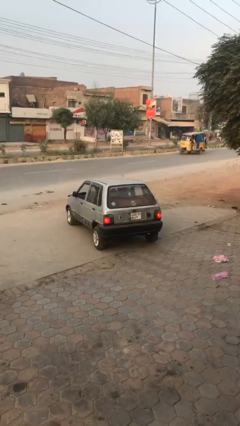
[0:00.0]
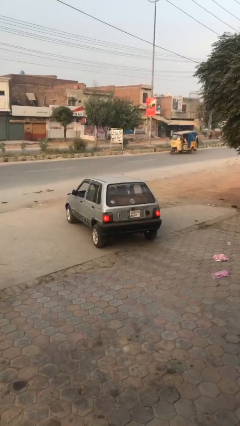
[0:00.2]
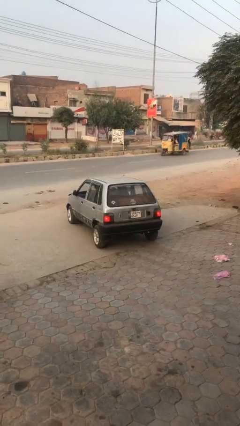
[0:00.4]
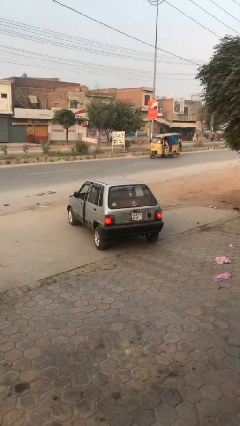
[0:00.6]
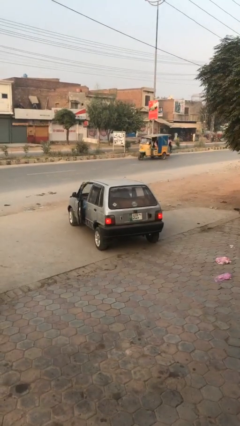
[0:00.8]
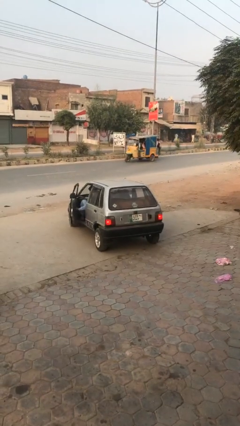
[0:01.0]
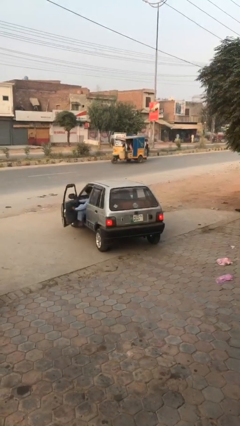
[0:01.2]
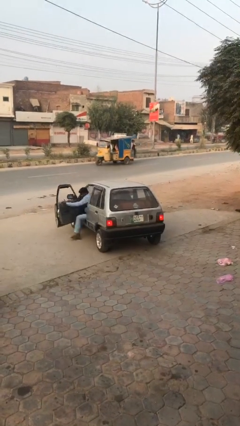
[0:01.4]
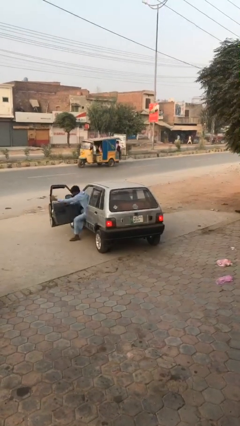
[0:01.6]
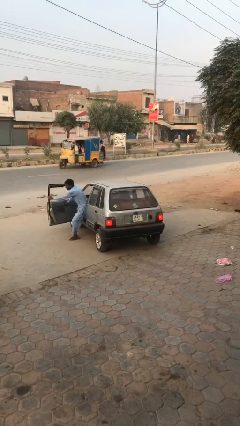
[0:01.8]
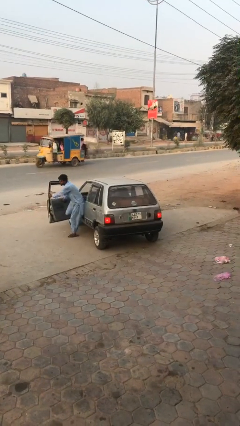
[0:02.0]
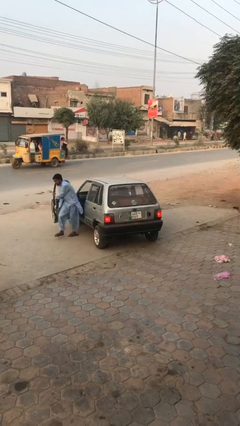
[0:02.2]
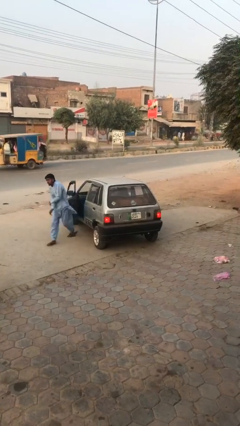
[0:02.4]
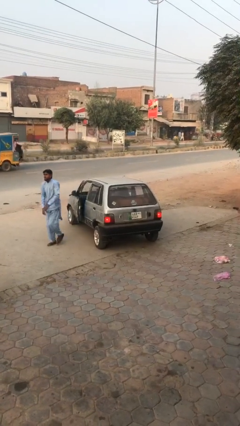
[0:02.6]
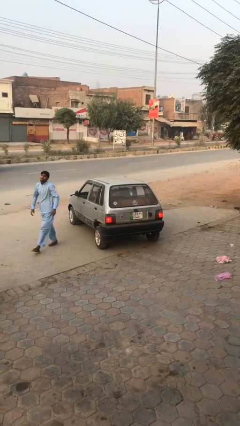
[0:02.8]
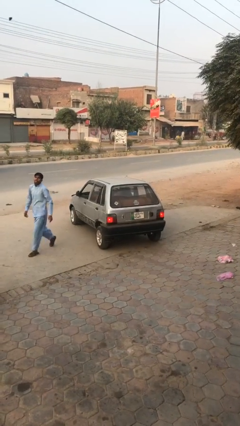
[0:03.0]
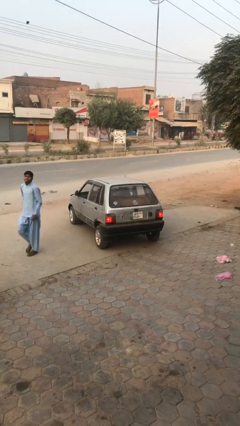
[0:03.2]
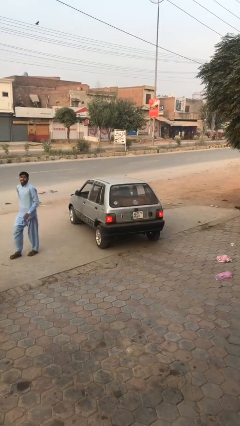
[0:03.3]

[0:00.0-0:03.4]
car drops off person

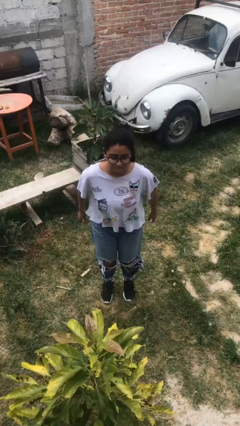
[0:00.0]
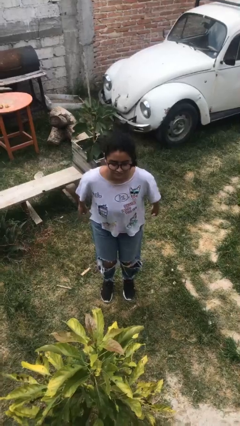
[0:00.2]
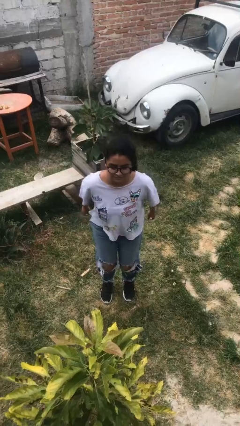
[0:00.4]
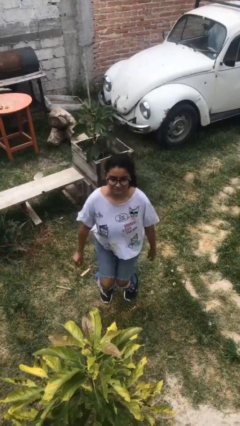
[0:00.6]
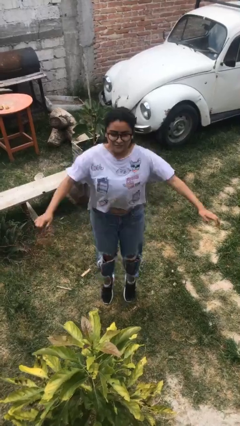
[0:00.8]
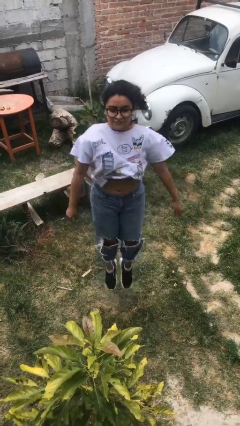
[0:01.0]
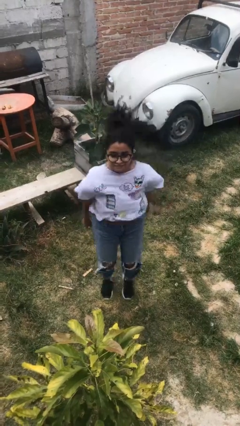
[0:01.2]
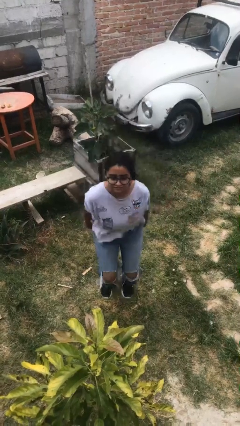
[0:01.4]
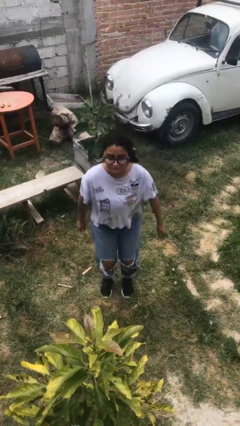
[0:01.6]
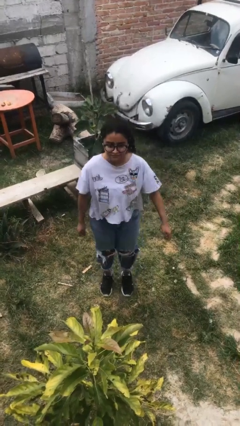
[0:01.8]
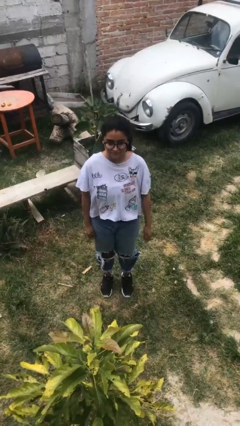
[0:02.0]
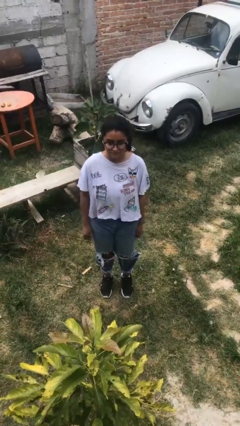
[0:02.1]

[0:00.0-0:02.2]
person jumps

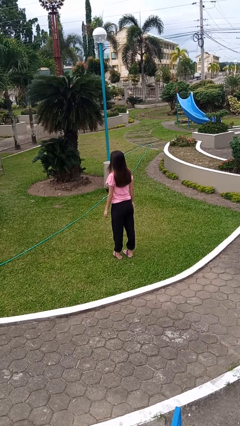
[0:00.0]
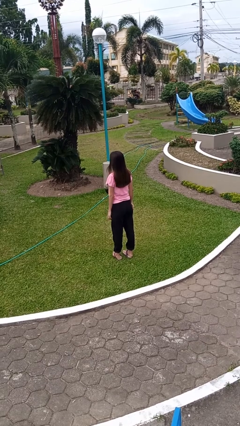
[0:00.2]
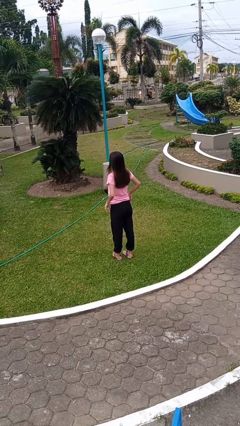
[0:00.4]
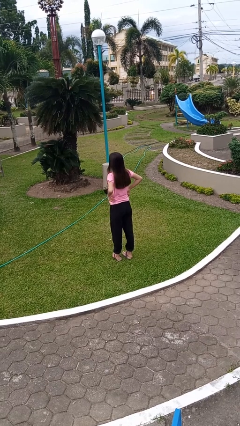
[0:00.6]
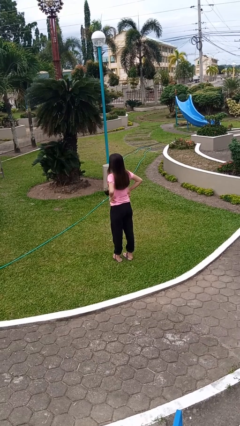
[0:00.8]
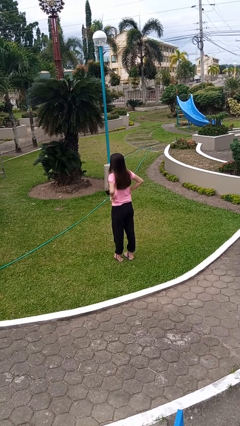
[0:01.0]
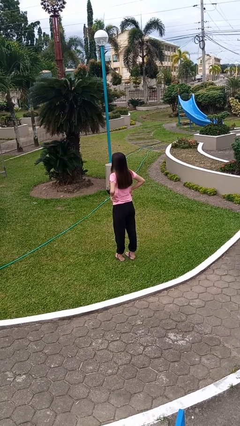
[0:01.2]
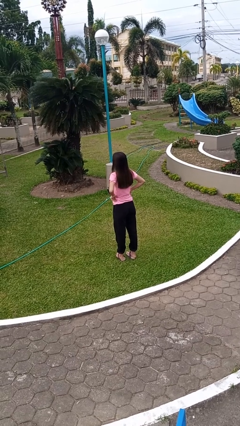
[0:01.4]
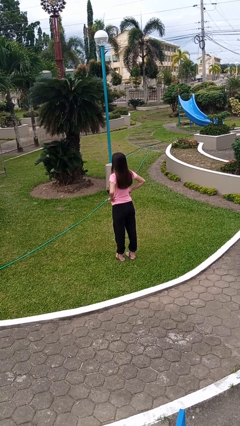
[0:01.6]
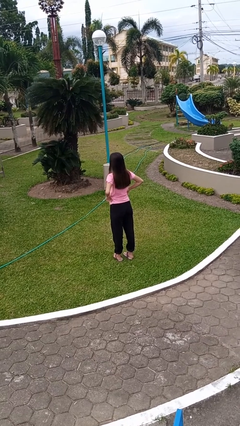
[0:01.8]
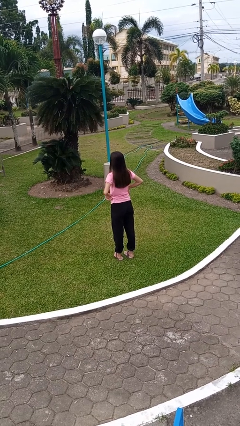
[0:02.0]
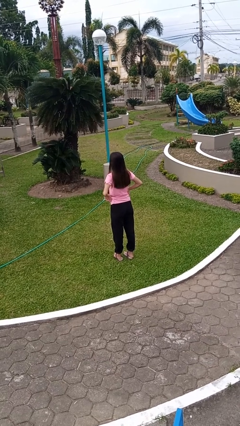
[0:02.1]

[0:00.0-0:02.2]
person hikes up pants

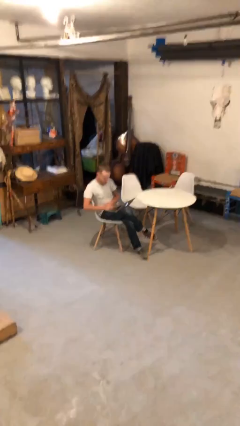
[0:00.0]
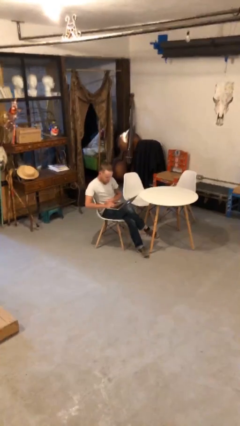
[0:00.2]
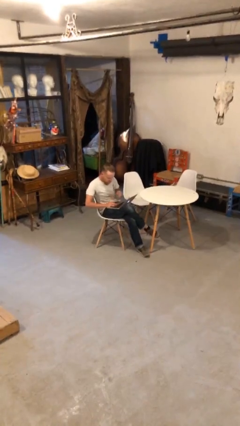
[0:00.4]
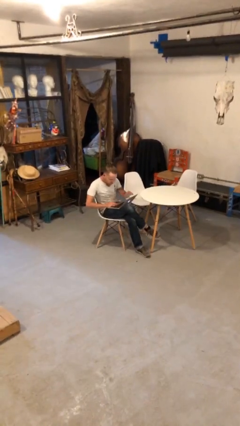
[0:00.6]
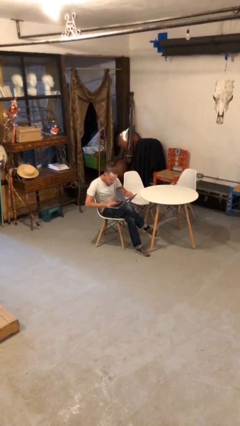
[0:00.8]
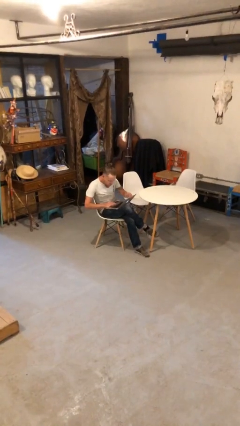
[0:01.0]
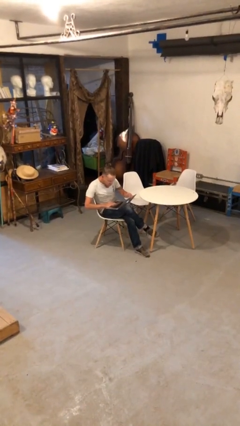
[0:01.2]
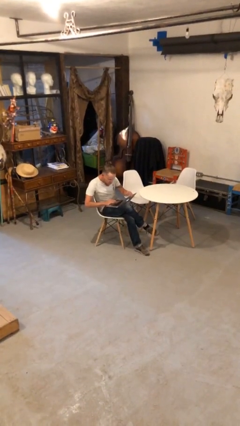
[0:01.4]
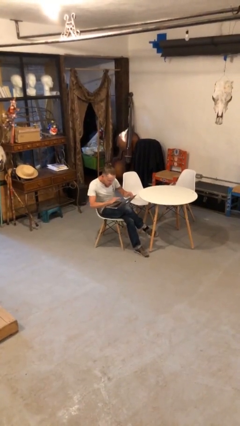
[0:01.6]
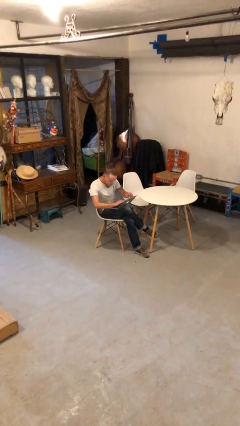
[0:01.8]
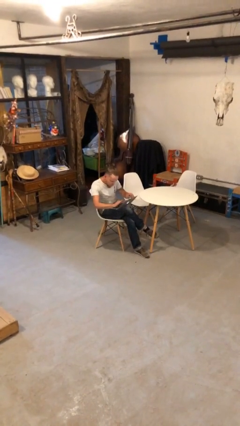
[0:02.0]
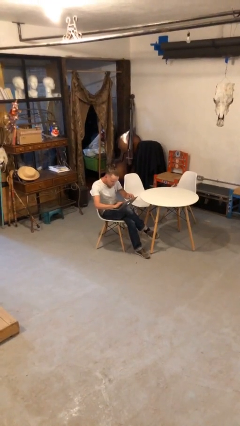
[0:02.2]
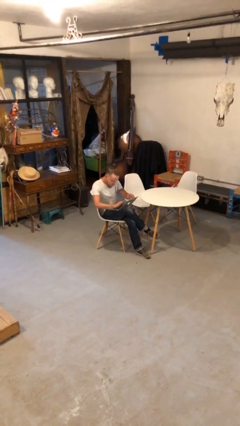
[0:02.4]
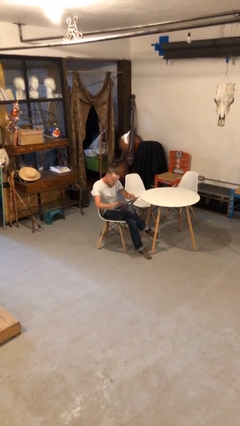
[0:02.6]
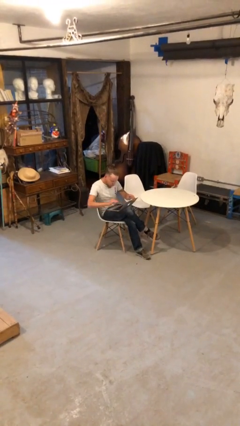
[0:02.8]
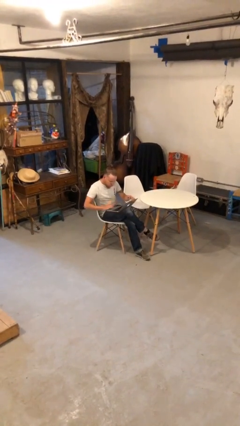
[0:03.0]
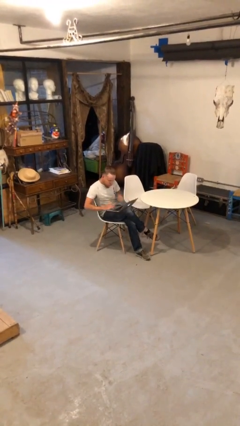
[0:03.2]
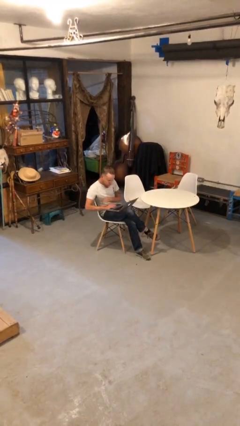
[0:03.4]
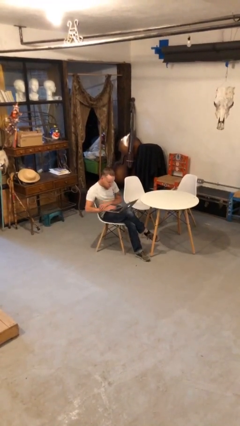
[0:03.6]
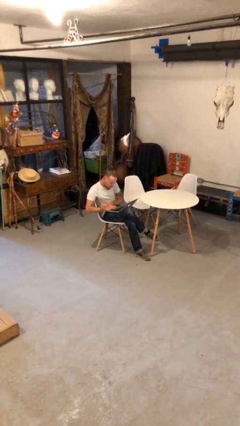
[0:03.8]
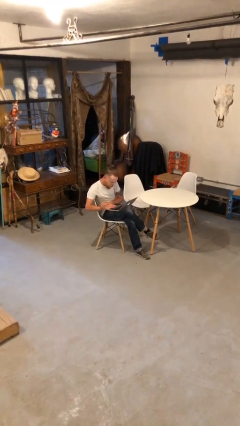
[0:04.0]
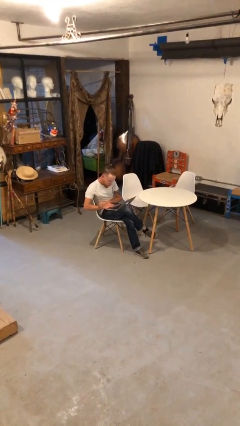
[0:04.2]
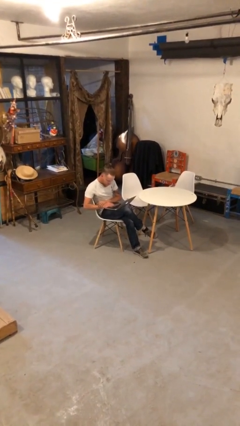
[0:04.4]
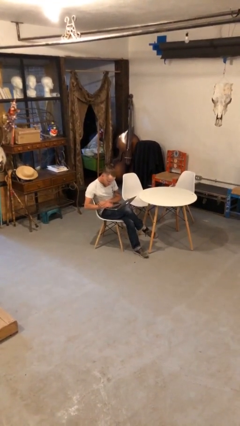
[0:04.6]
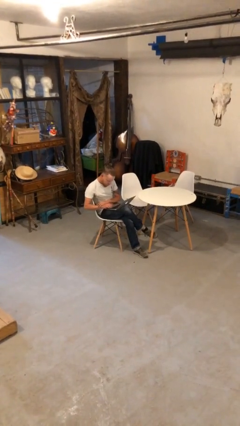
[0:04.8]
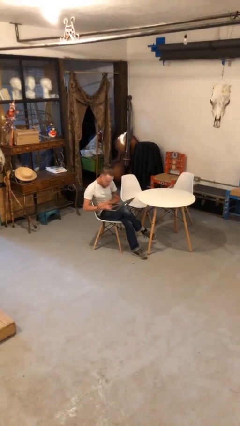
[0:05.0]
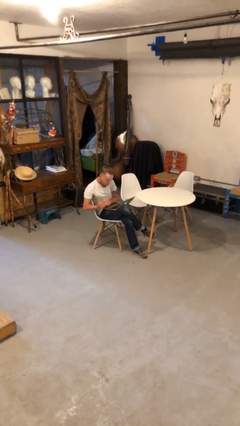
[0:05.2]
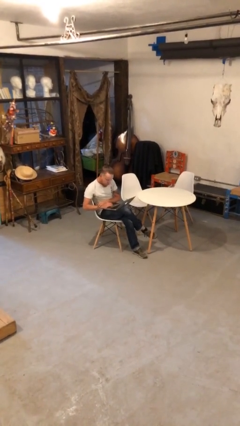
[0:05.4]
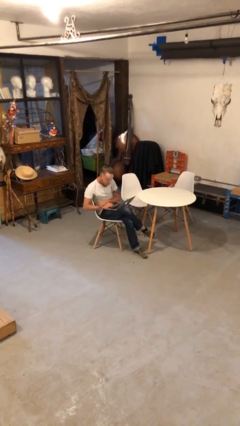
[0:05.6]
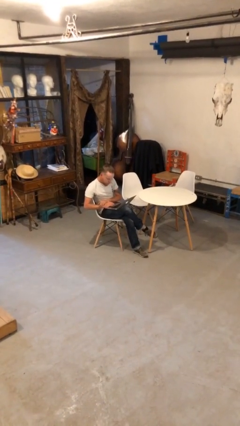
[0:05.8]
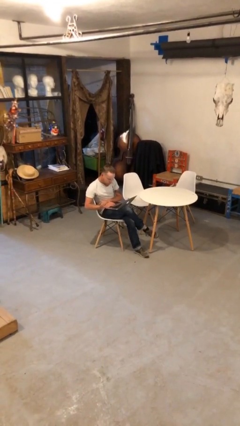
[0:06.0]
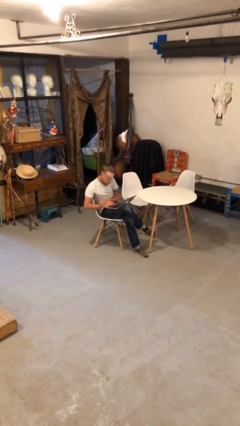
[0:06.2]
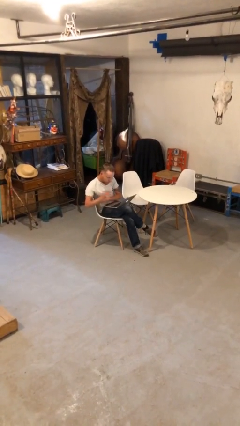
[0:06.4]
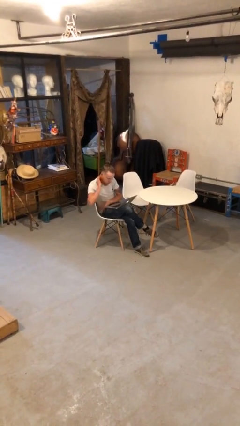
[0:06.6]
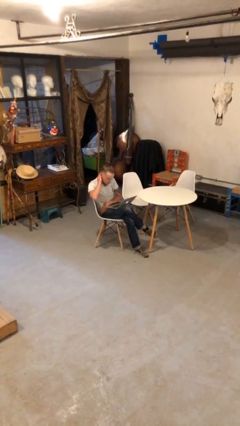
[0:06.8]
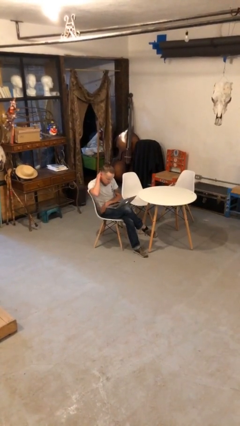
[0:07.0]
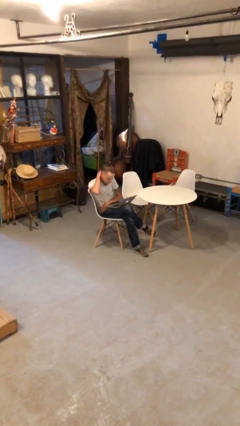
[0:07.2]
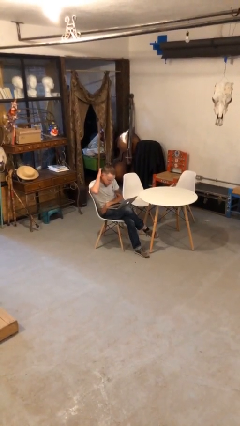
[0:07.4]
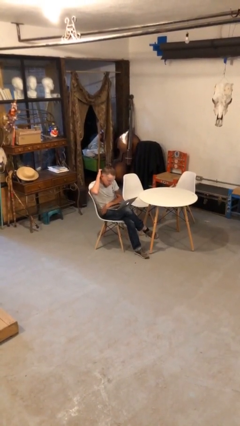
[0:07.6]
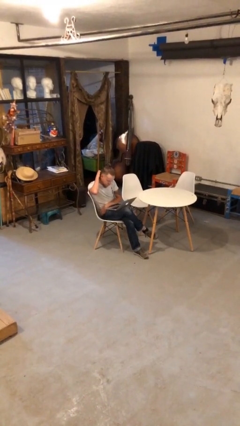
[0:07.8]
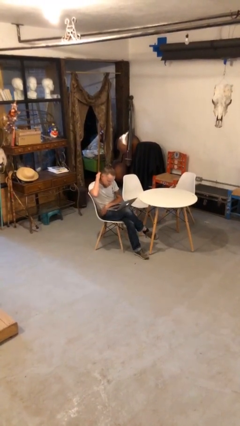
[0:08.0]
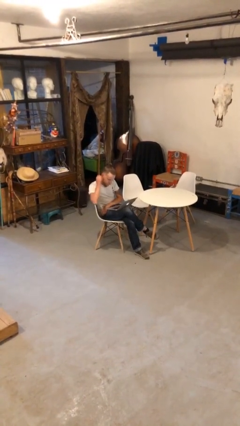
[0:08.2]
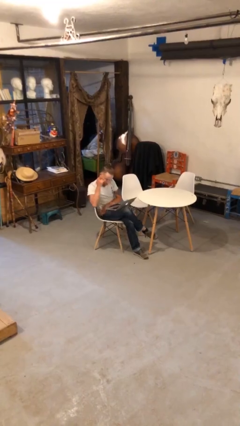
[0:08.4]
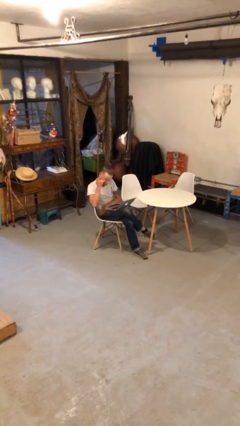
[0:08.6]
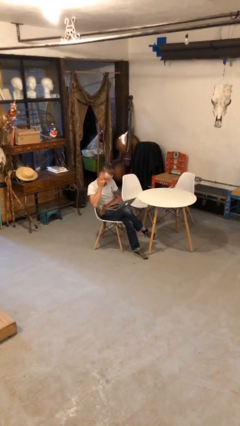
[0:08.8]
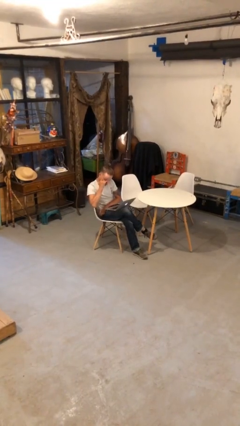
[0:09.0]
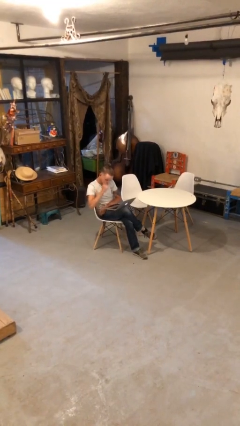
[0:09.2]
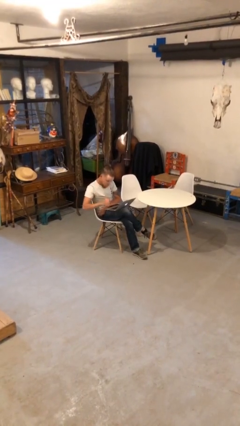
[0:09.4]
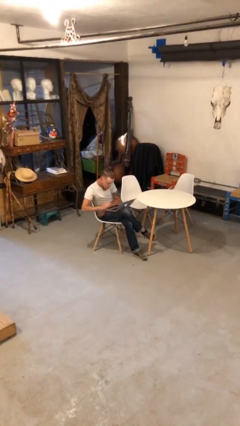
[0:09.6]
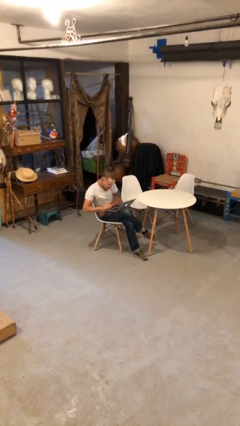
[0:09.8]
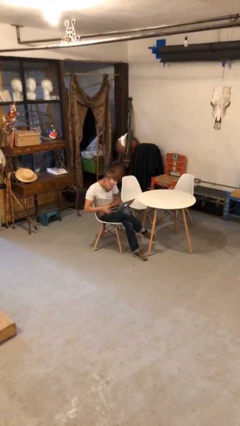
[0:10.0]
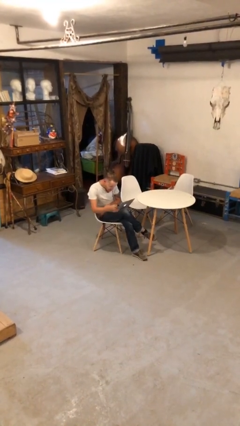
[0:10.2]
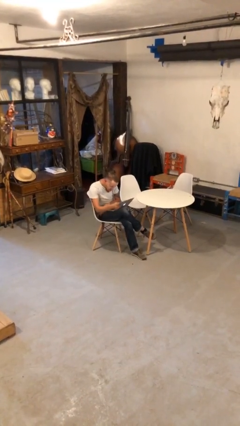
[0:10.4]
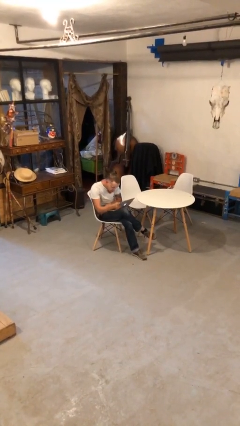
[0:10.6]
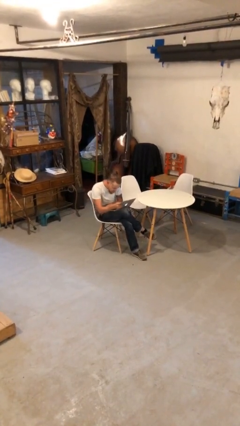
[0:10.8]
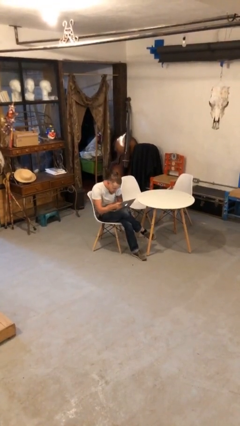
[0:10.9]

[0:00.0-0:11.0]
person interacts with laptop
